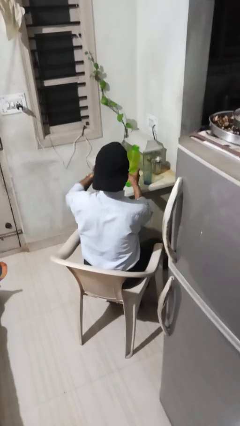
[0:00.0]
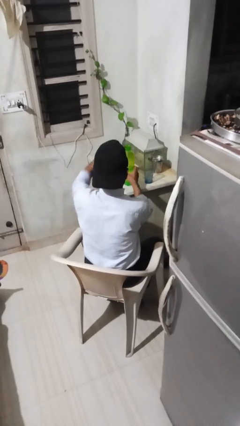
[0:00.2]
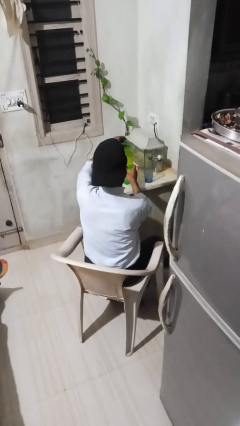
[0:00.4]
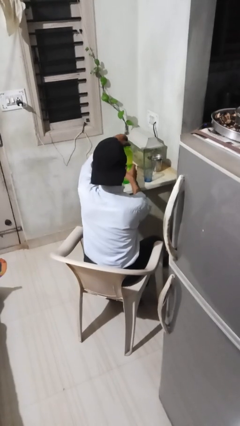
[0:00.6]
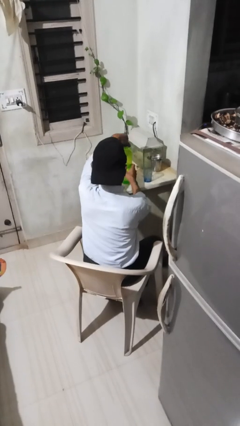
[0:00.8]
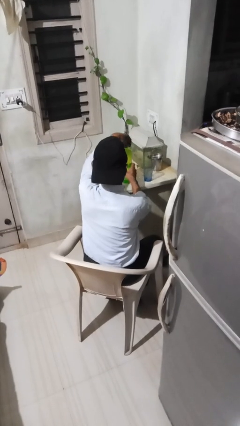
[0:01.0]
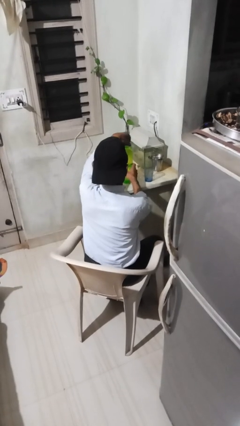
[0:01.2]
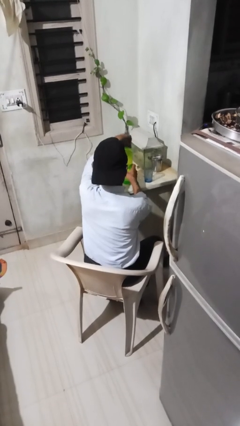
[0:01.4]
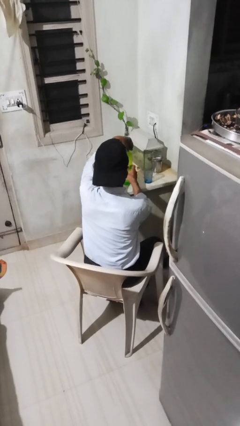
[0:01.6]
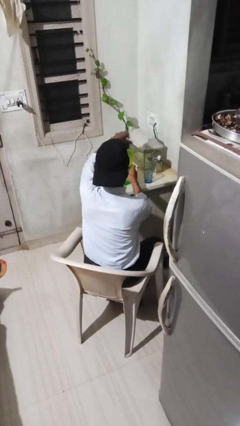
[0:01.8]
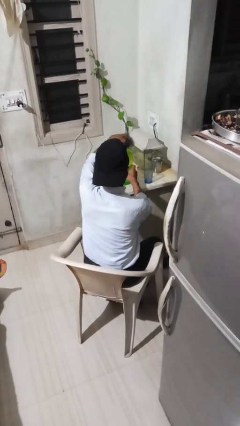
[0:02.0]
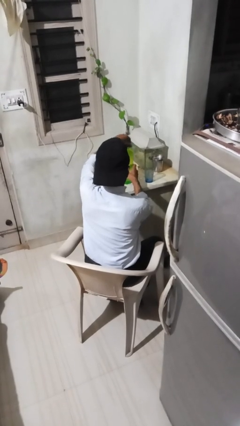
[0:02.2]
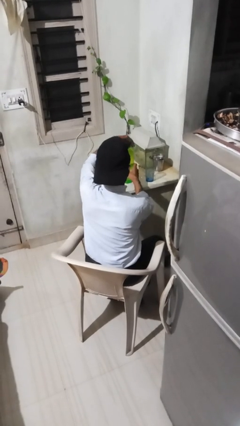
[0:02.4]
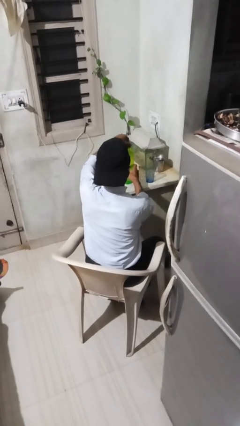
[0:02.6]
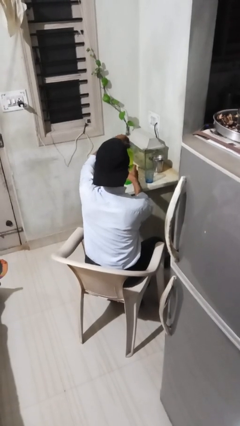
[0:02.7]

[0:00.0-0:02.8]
person screws lid to bottle

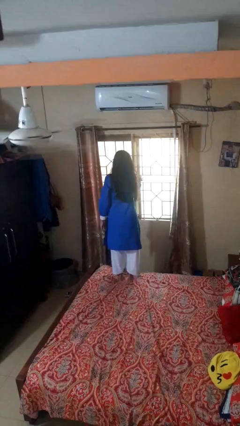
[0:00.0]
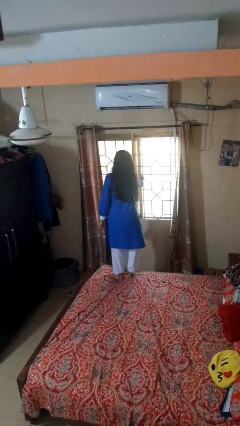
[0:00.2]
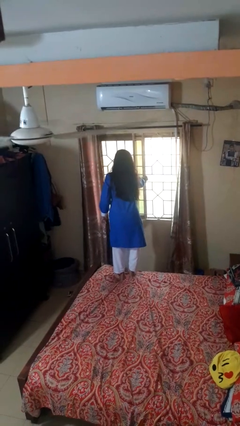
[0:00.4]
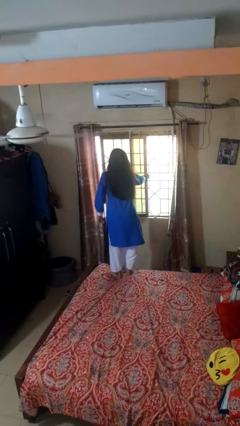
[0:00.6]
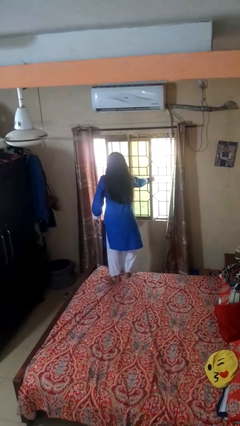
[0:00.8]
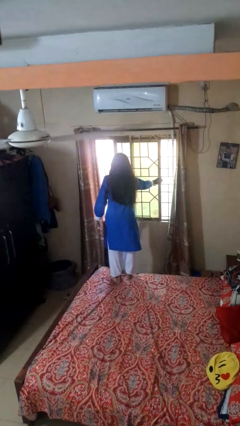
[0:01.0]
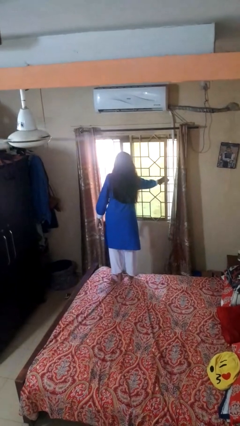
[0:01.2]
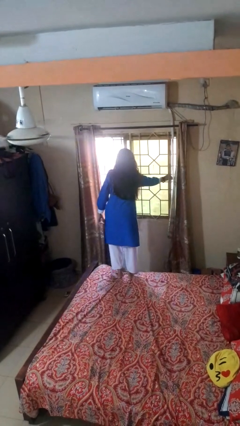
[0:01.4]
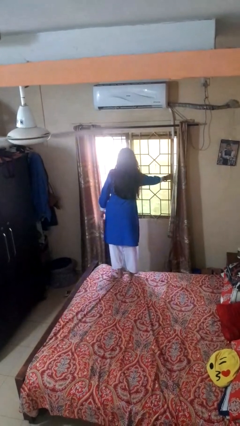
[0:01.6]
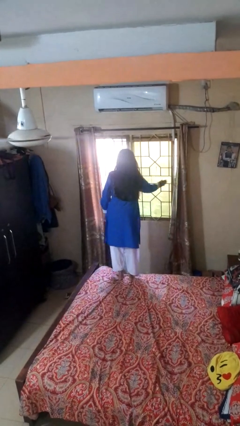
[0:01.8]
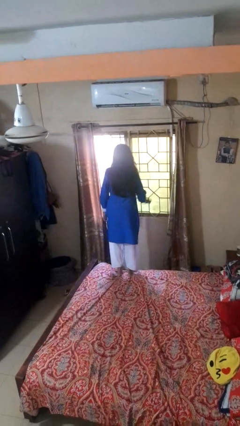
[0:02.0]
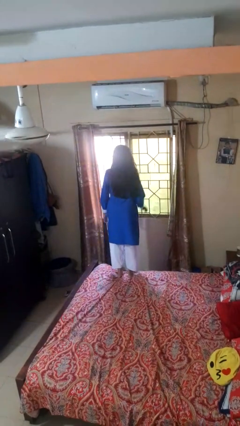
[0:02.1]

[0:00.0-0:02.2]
person opens home window

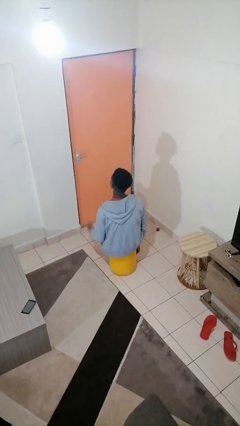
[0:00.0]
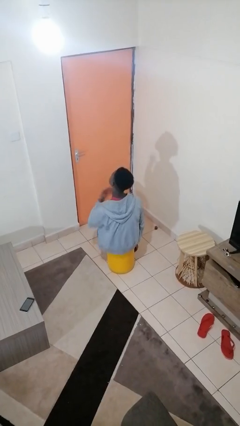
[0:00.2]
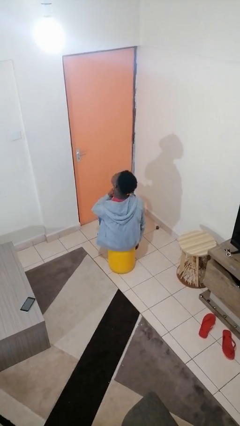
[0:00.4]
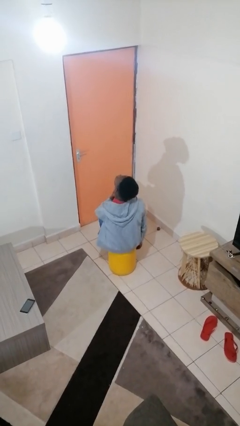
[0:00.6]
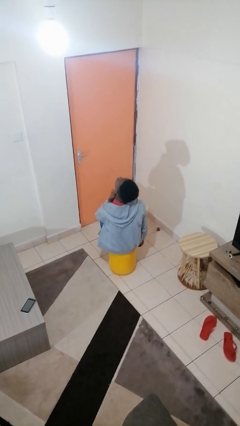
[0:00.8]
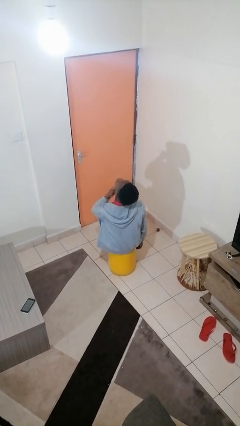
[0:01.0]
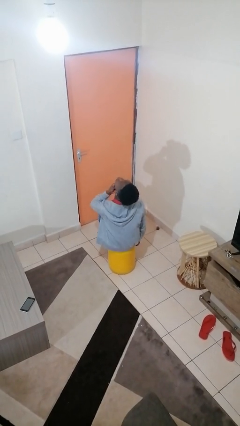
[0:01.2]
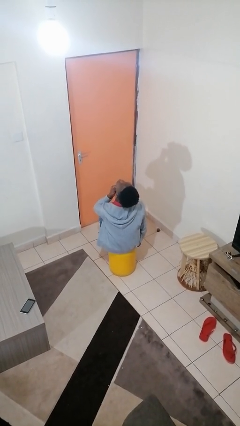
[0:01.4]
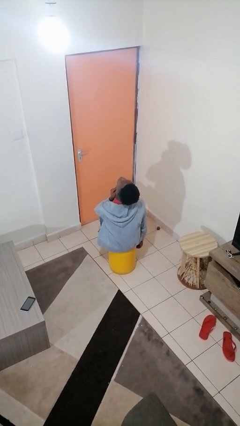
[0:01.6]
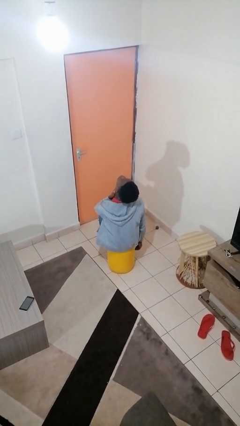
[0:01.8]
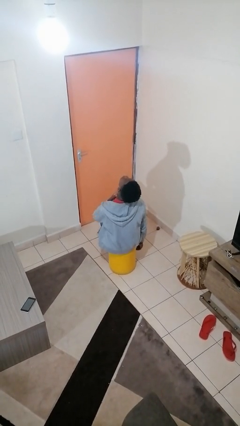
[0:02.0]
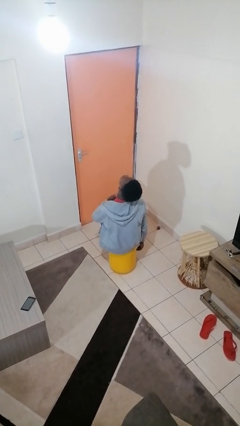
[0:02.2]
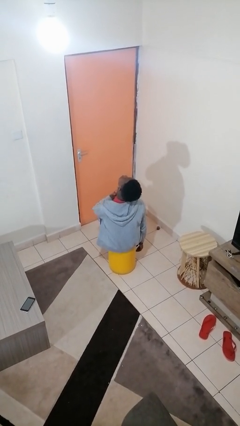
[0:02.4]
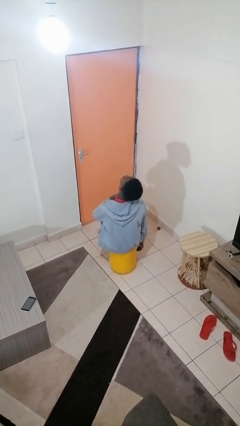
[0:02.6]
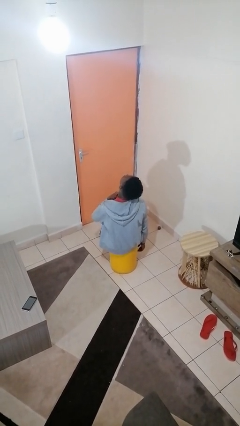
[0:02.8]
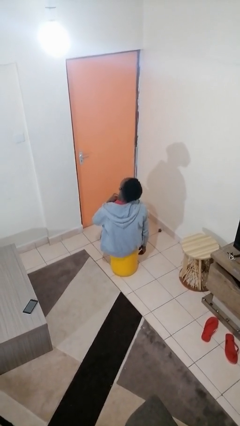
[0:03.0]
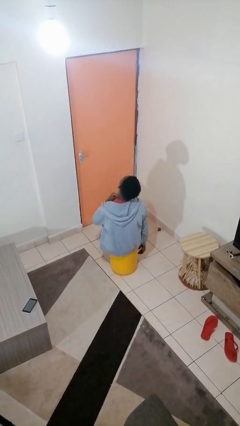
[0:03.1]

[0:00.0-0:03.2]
person rubs neck

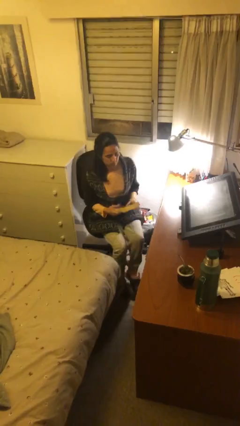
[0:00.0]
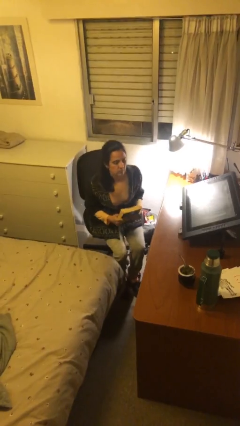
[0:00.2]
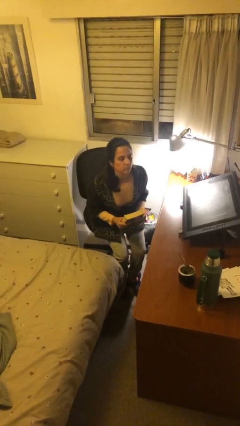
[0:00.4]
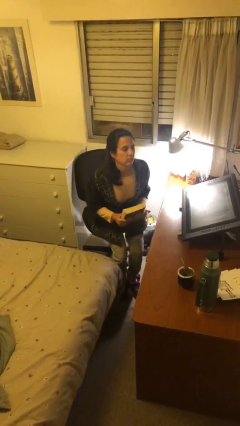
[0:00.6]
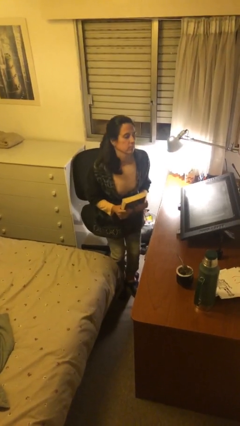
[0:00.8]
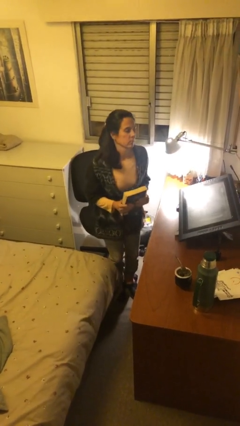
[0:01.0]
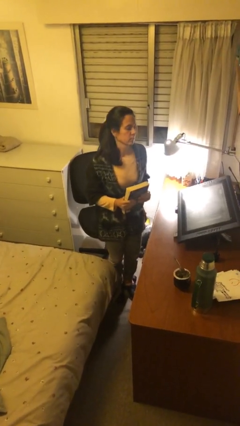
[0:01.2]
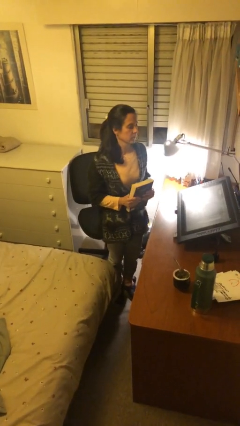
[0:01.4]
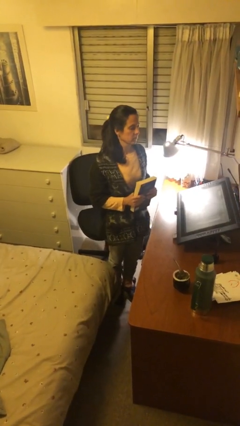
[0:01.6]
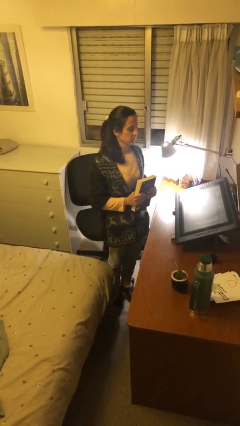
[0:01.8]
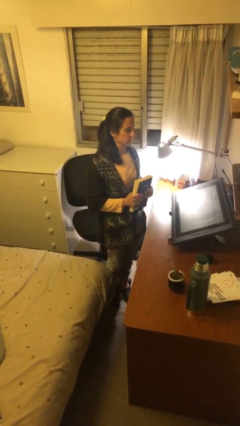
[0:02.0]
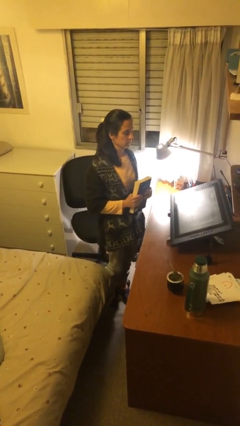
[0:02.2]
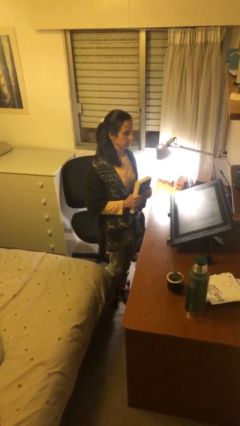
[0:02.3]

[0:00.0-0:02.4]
person stands up

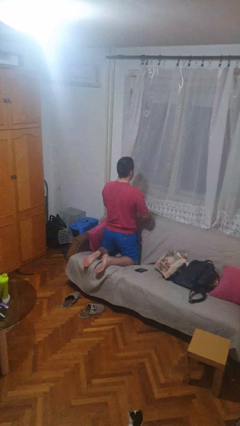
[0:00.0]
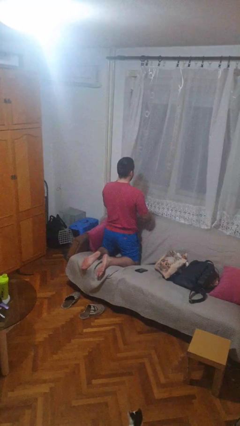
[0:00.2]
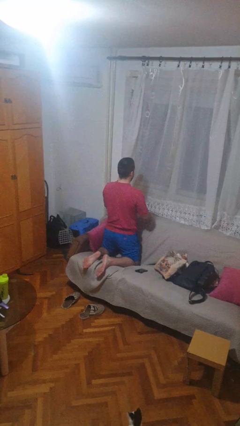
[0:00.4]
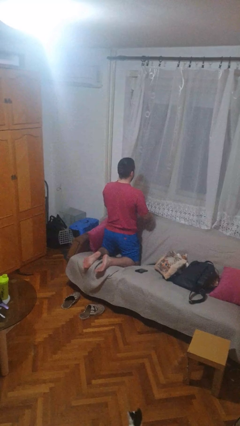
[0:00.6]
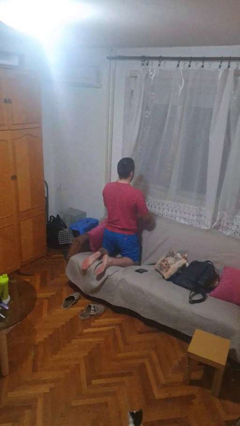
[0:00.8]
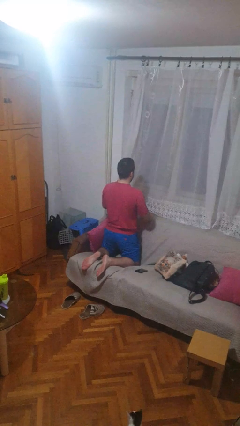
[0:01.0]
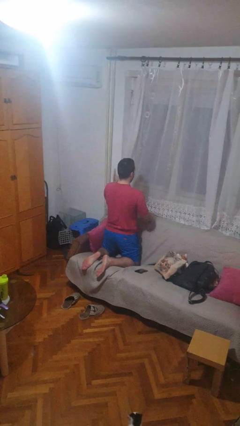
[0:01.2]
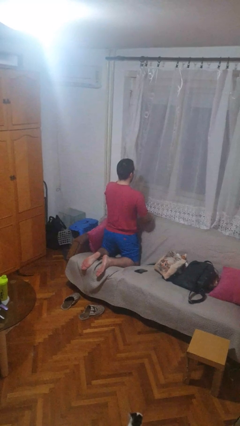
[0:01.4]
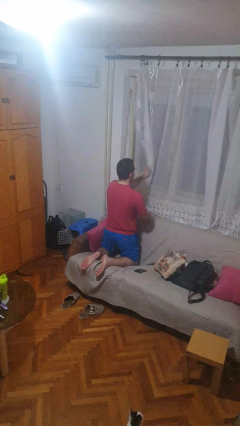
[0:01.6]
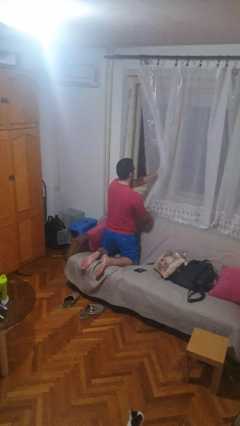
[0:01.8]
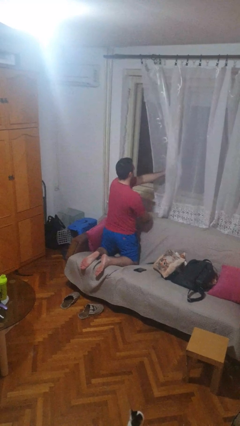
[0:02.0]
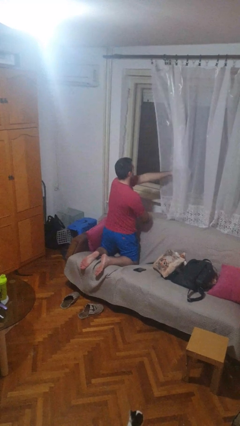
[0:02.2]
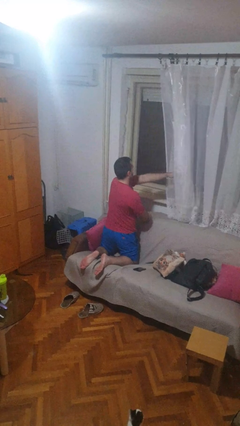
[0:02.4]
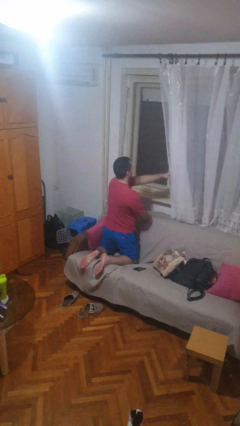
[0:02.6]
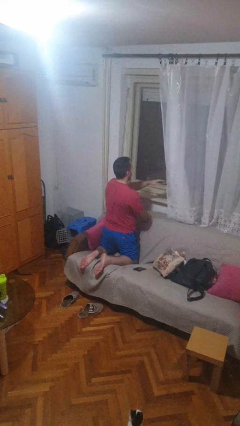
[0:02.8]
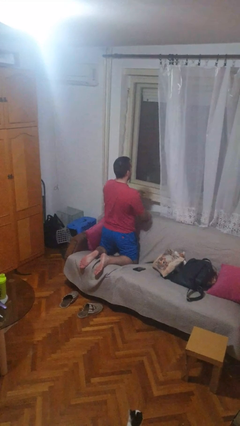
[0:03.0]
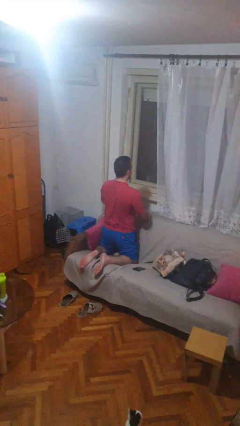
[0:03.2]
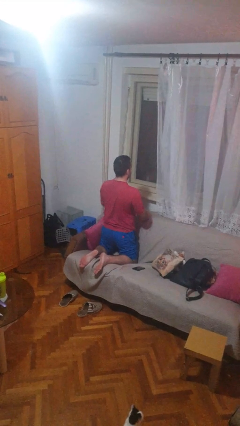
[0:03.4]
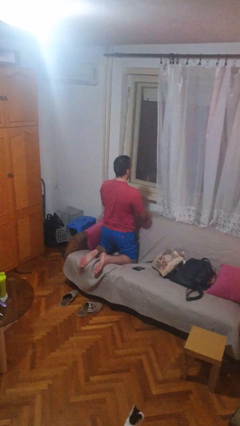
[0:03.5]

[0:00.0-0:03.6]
person opens curtains

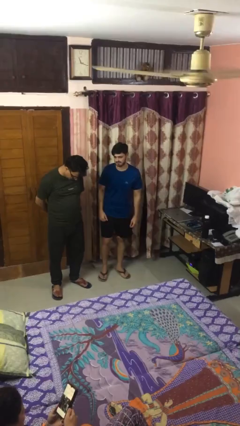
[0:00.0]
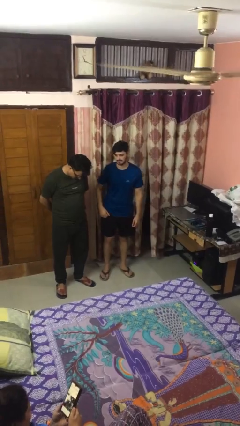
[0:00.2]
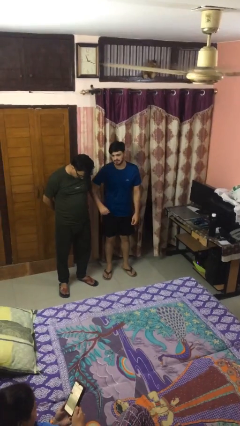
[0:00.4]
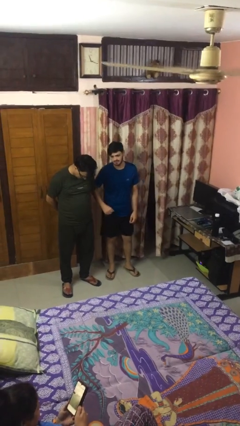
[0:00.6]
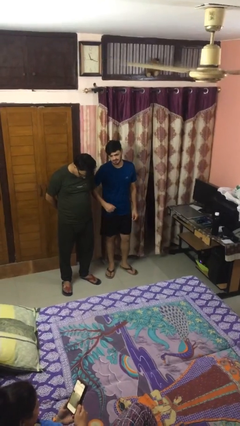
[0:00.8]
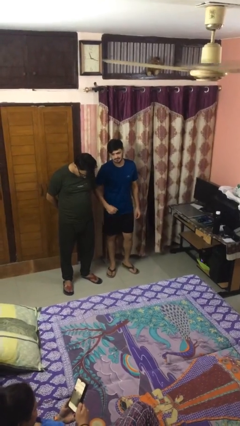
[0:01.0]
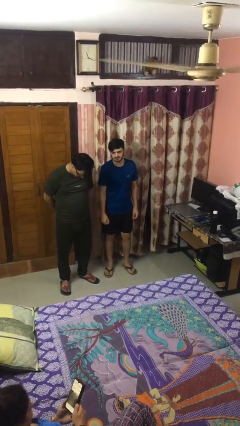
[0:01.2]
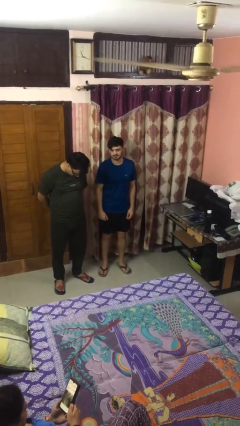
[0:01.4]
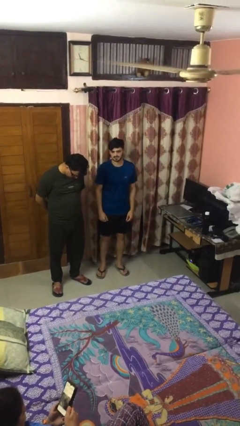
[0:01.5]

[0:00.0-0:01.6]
person nudges person with elbow

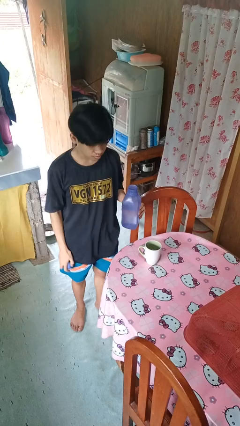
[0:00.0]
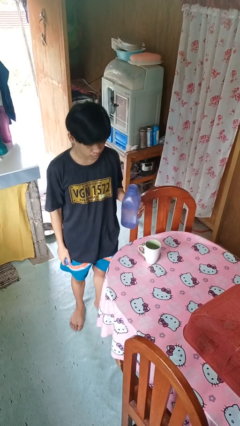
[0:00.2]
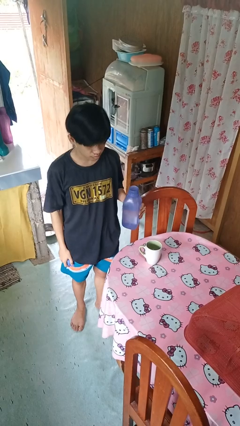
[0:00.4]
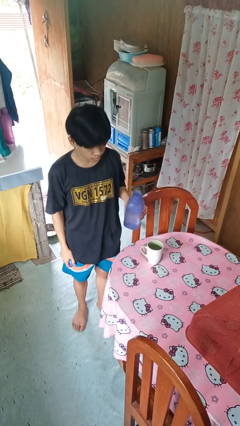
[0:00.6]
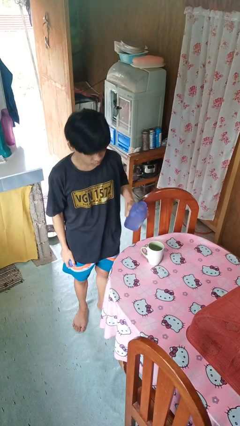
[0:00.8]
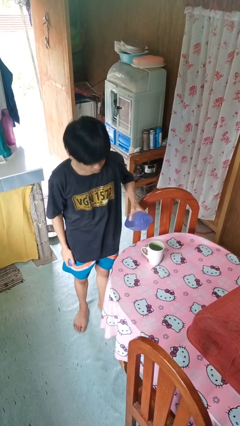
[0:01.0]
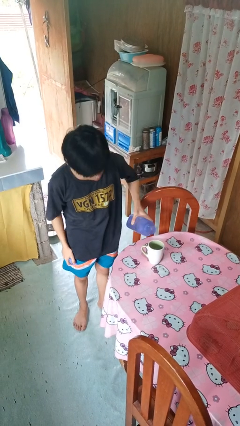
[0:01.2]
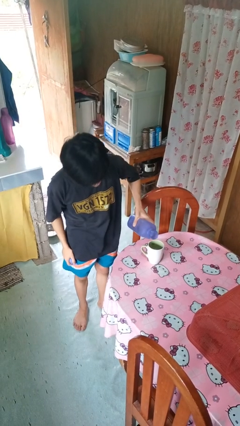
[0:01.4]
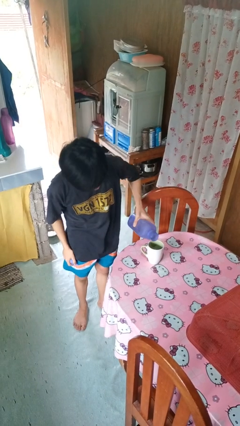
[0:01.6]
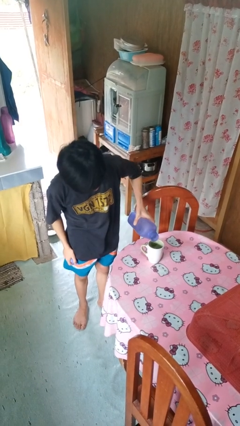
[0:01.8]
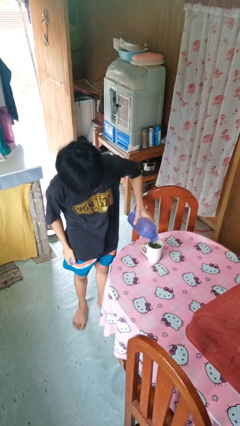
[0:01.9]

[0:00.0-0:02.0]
person pours liquid into cup
